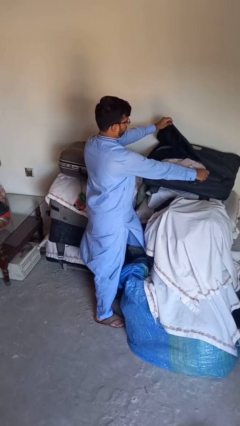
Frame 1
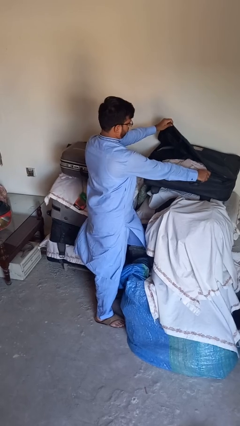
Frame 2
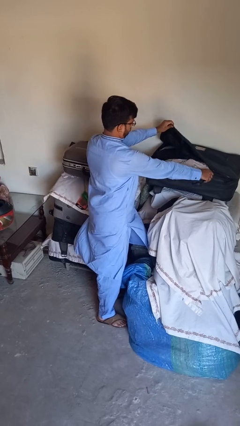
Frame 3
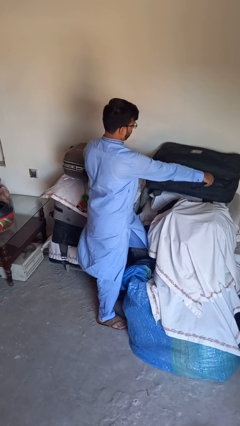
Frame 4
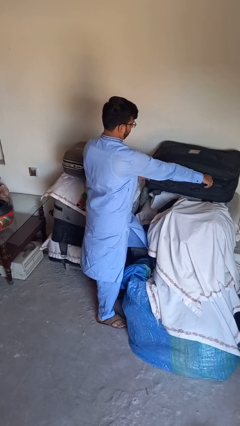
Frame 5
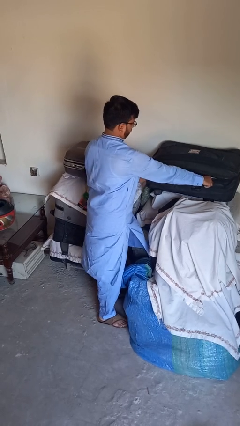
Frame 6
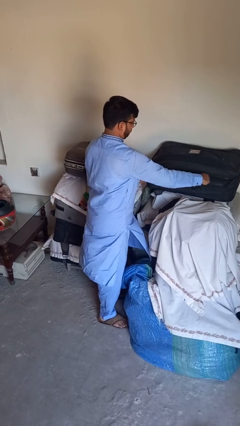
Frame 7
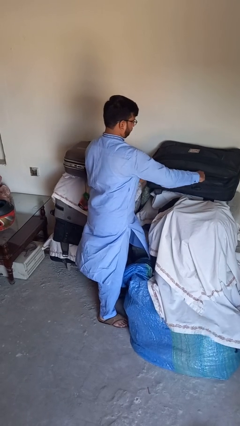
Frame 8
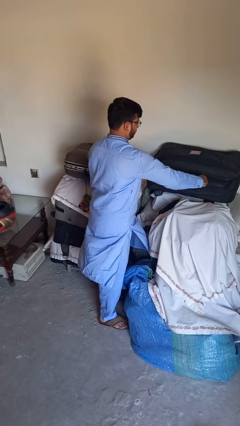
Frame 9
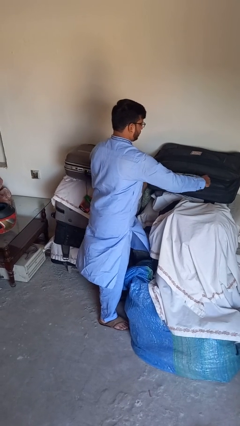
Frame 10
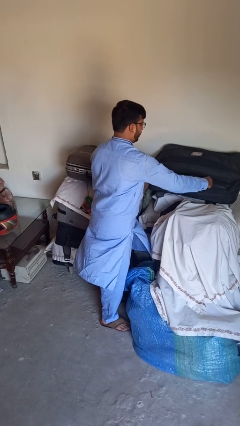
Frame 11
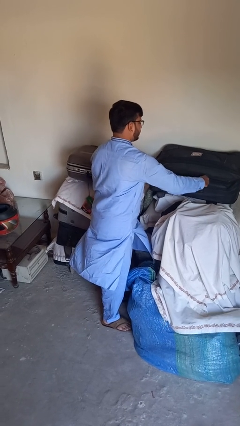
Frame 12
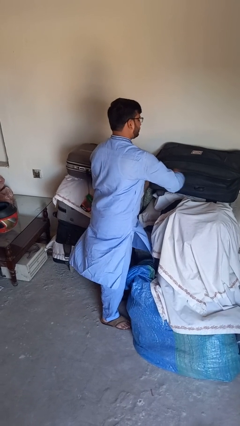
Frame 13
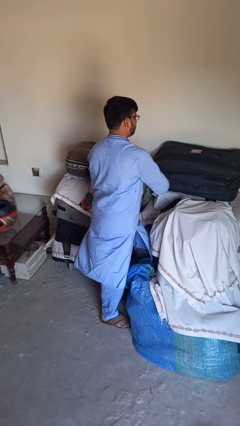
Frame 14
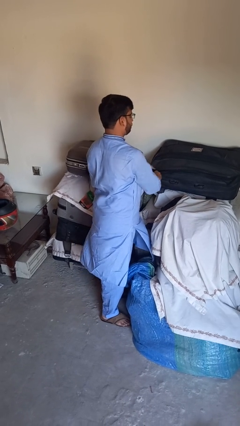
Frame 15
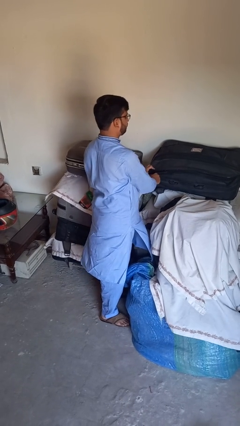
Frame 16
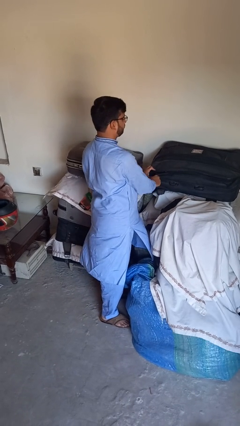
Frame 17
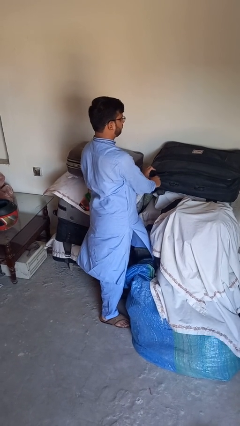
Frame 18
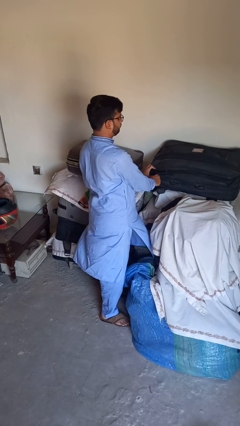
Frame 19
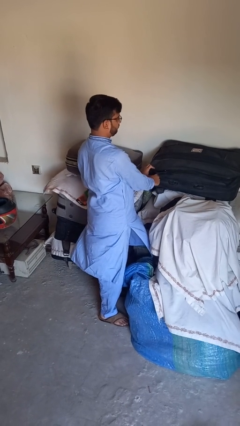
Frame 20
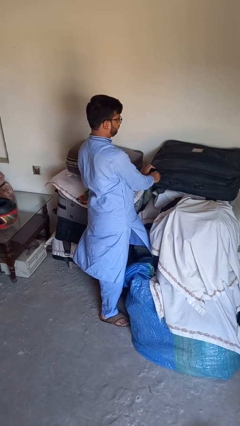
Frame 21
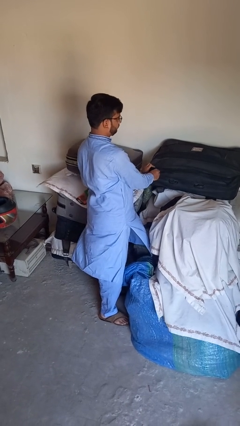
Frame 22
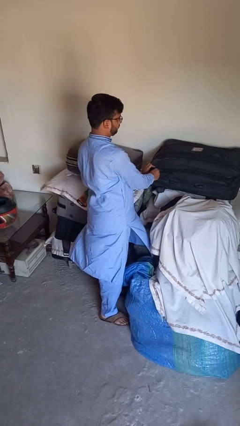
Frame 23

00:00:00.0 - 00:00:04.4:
person closes suitcase

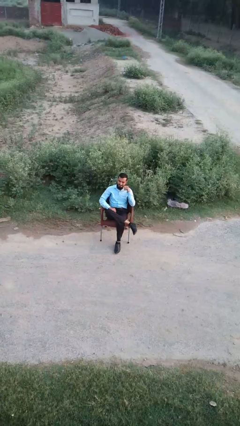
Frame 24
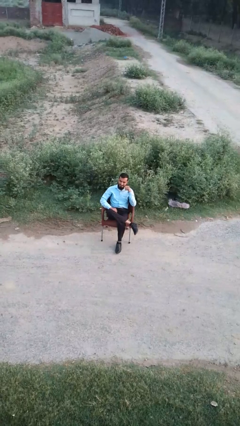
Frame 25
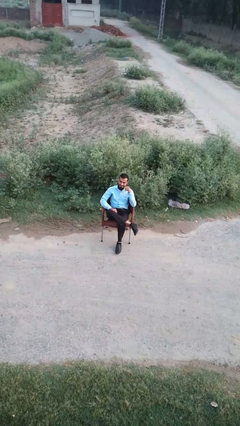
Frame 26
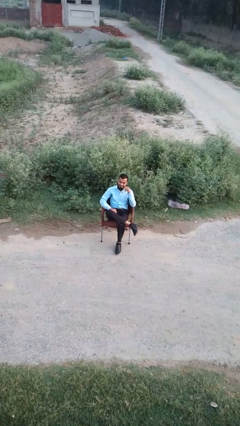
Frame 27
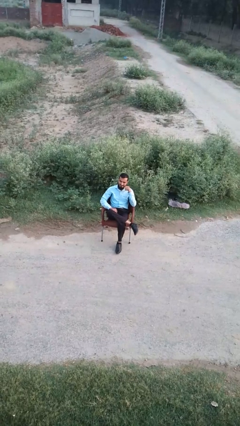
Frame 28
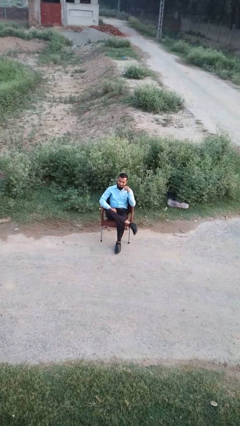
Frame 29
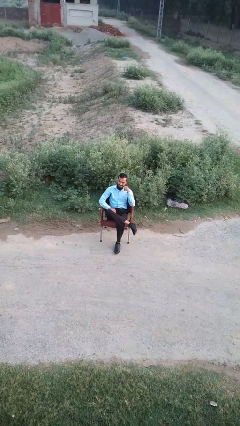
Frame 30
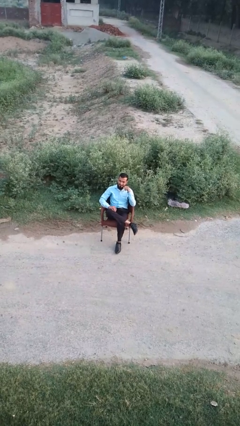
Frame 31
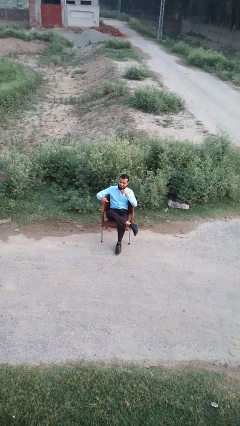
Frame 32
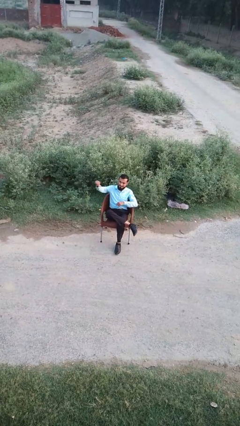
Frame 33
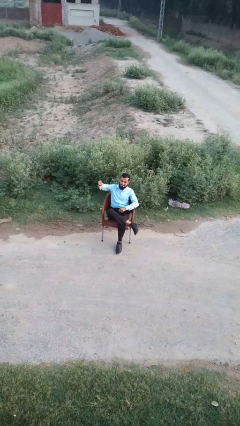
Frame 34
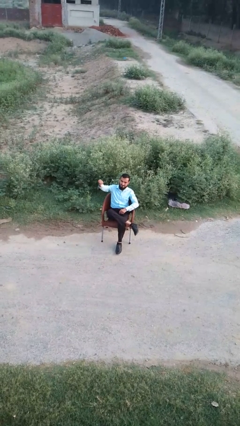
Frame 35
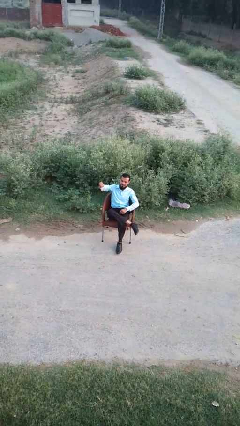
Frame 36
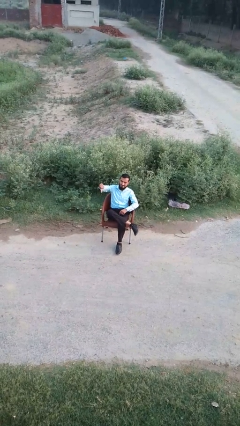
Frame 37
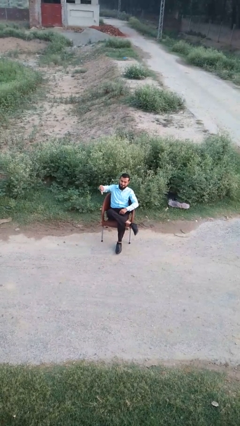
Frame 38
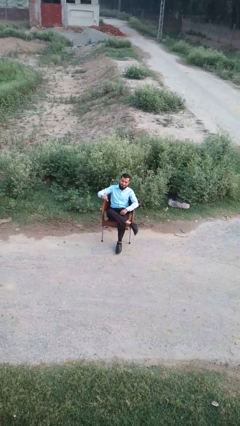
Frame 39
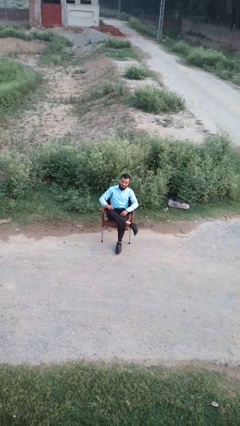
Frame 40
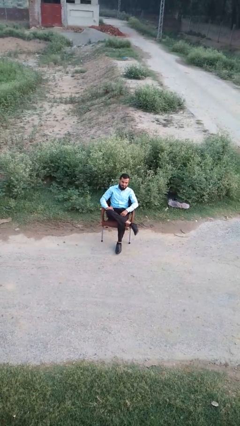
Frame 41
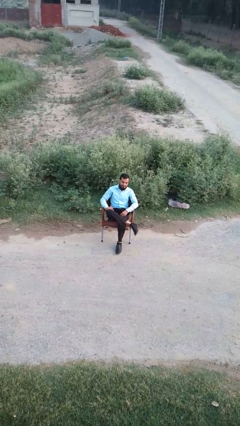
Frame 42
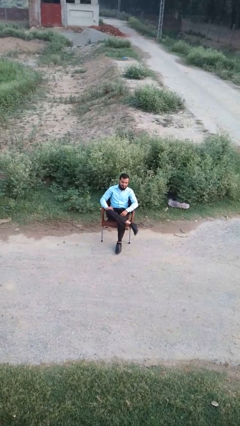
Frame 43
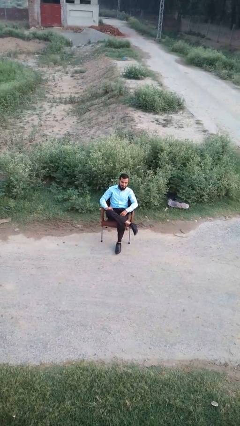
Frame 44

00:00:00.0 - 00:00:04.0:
person gestures thumbs down

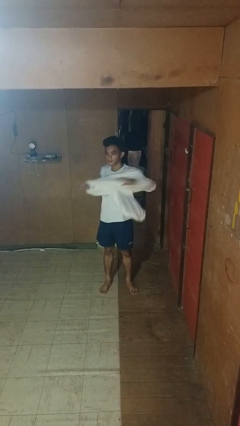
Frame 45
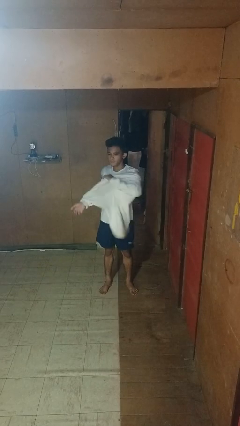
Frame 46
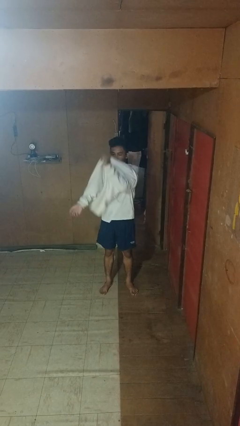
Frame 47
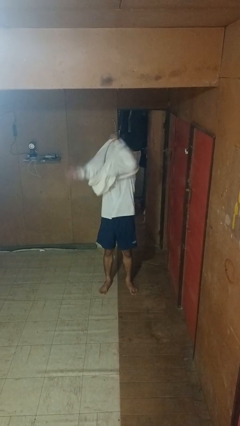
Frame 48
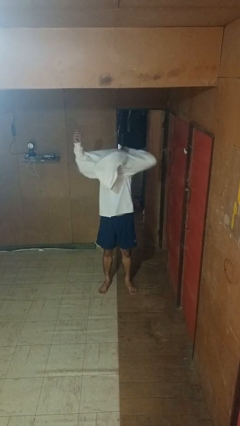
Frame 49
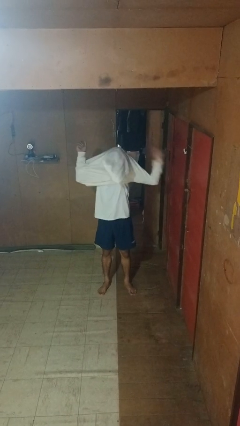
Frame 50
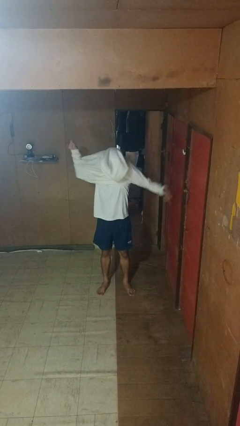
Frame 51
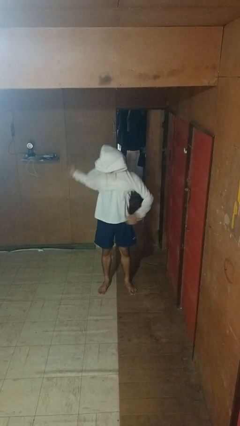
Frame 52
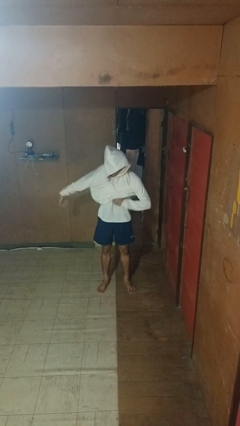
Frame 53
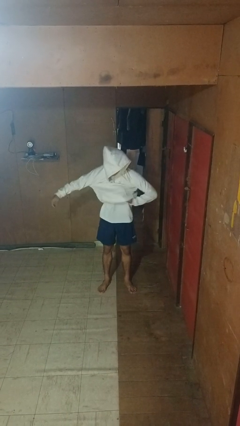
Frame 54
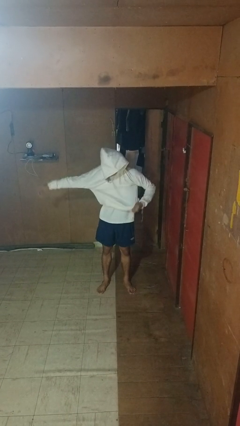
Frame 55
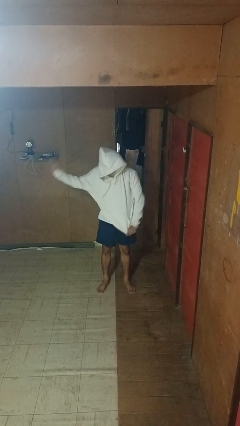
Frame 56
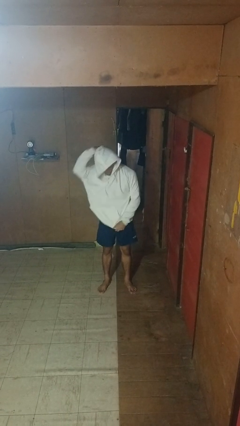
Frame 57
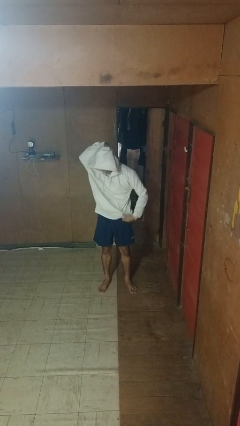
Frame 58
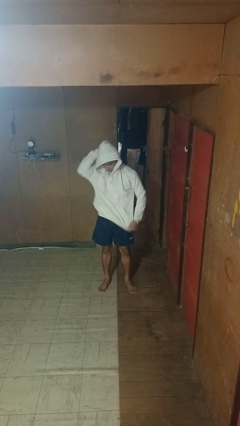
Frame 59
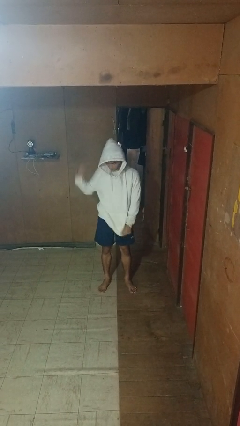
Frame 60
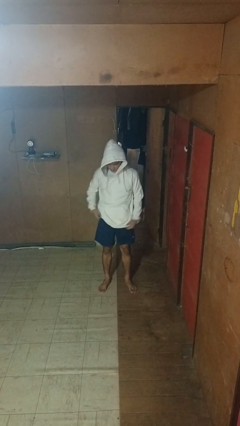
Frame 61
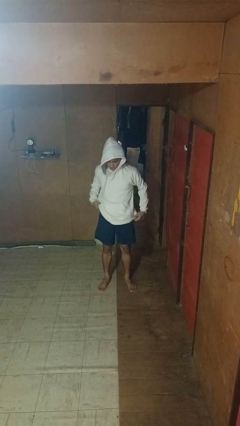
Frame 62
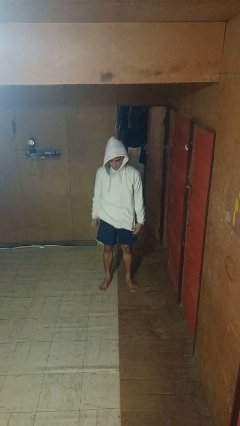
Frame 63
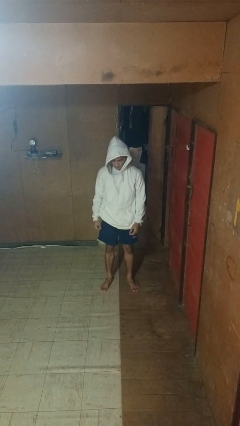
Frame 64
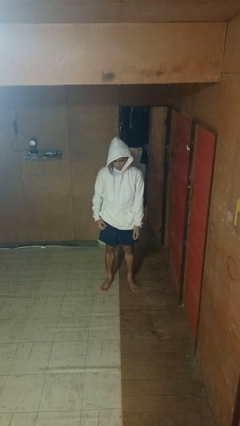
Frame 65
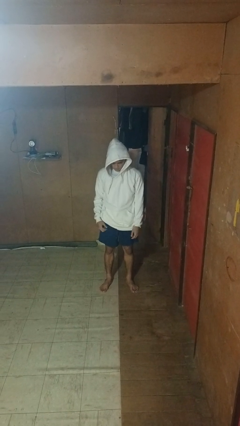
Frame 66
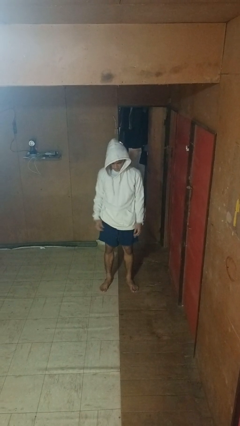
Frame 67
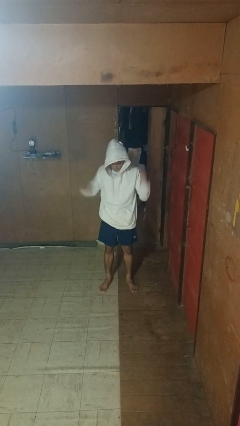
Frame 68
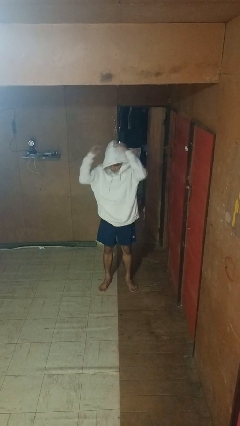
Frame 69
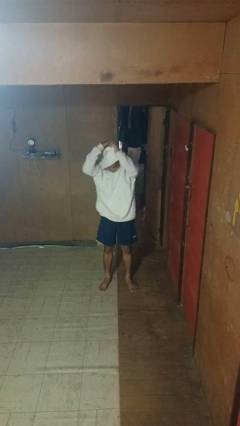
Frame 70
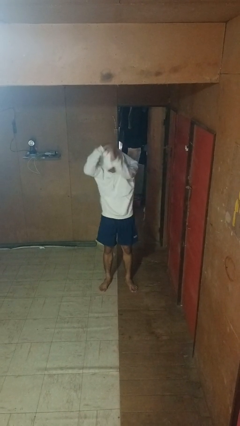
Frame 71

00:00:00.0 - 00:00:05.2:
person puts on hoodie

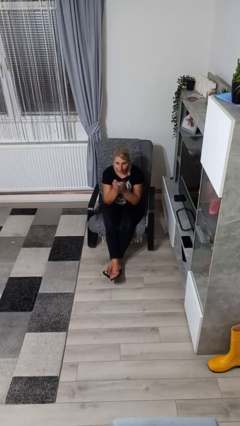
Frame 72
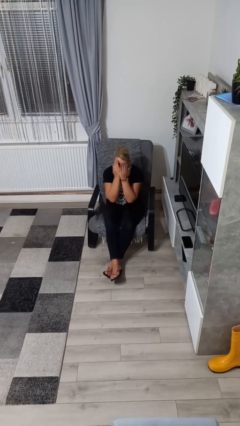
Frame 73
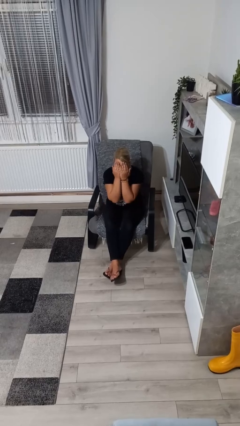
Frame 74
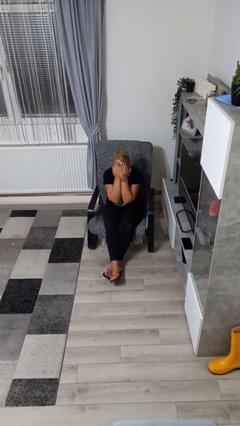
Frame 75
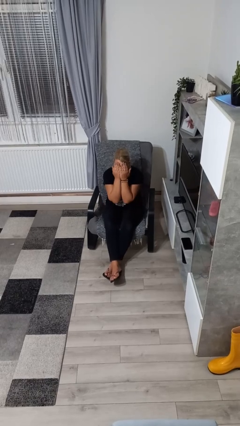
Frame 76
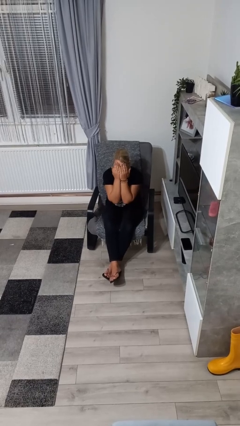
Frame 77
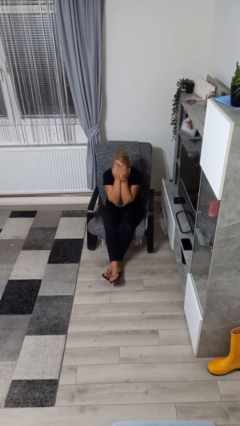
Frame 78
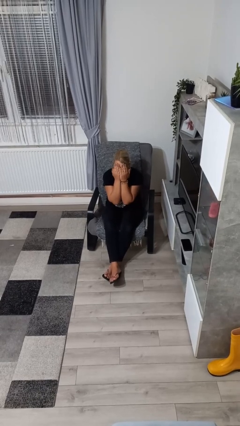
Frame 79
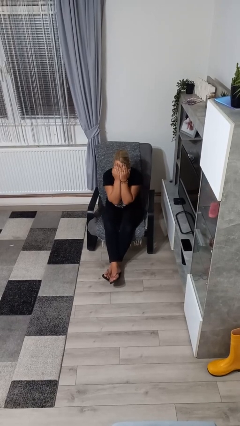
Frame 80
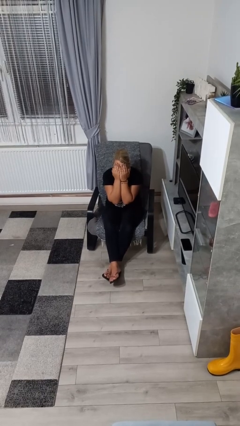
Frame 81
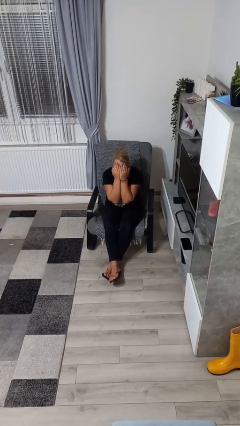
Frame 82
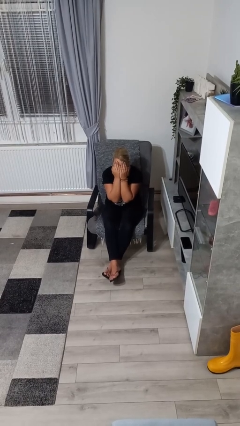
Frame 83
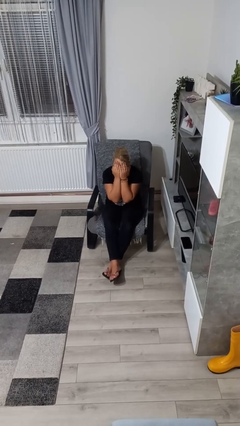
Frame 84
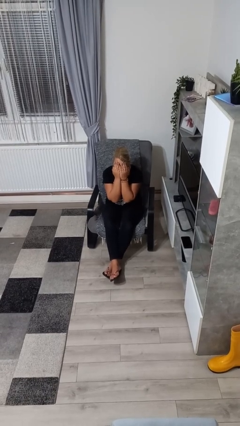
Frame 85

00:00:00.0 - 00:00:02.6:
person covers face with hands

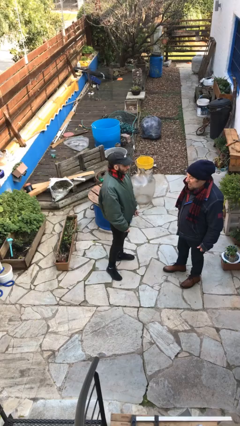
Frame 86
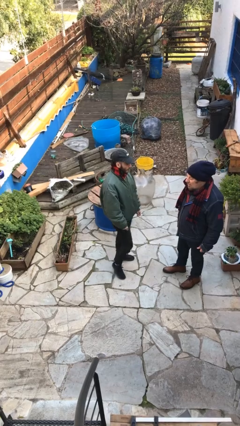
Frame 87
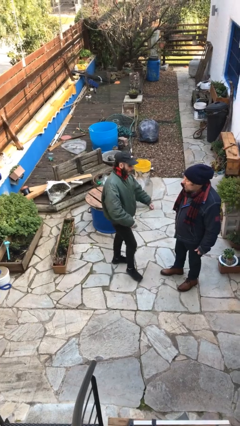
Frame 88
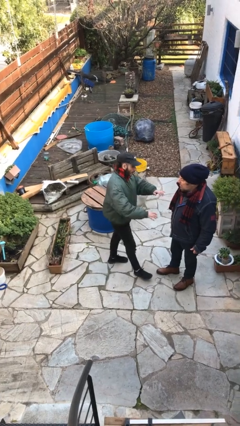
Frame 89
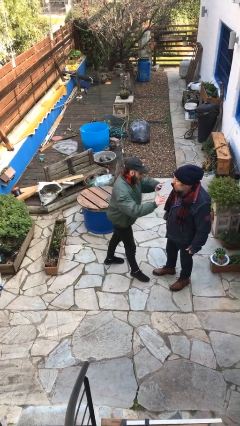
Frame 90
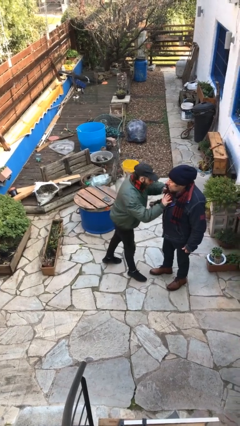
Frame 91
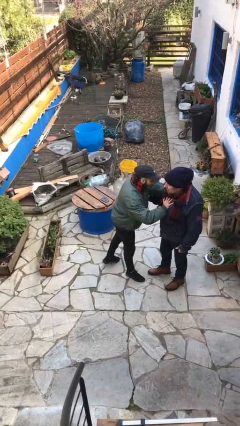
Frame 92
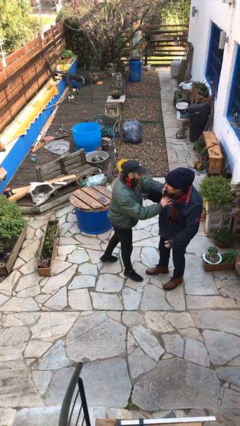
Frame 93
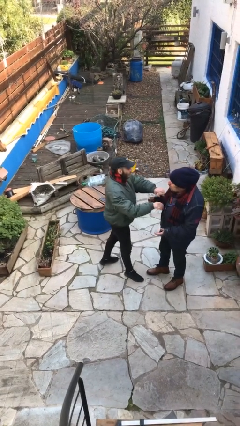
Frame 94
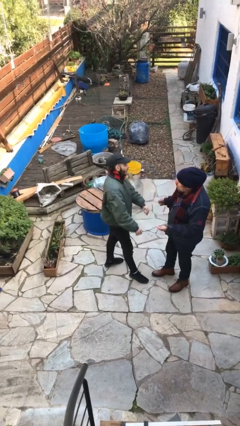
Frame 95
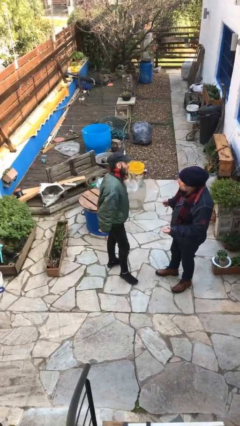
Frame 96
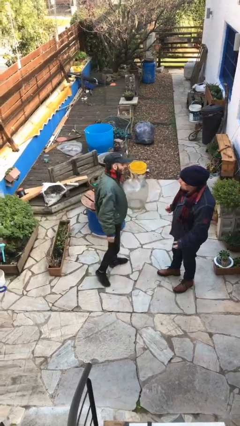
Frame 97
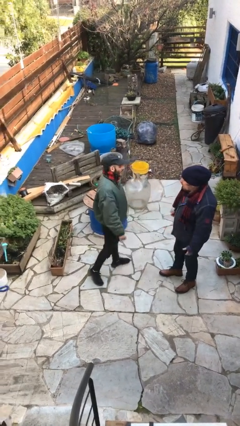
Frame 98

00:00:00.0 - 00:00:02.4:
person shoves person
